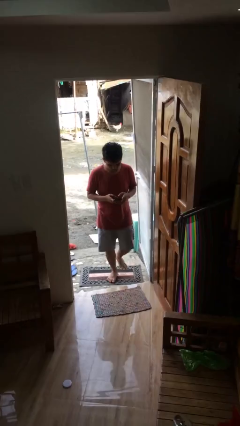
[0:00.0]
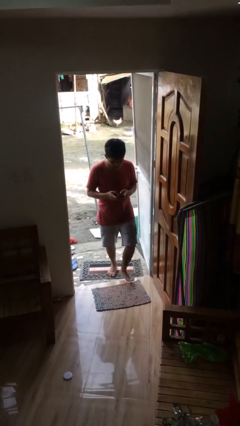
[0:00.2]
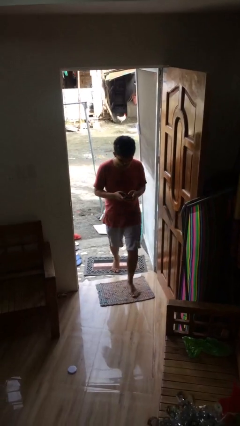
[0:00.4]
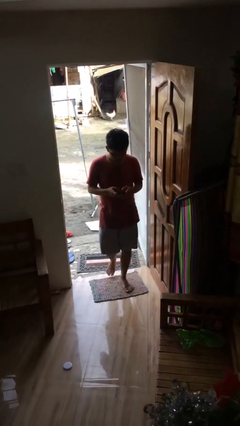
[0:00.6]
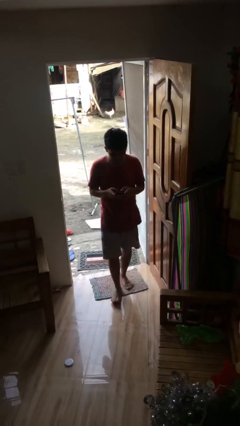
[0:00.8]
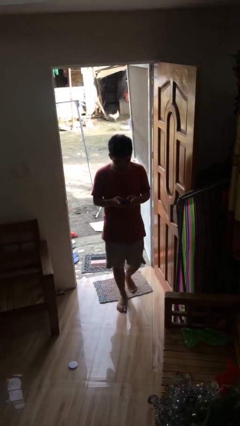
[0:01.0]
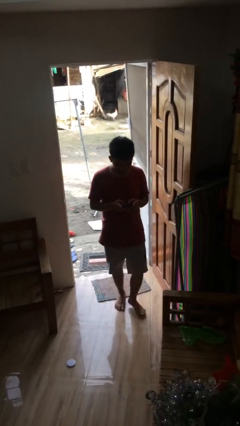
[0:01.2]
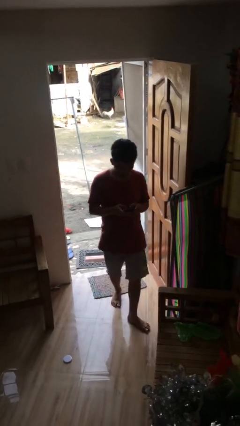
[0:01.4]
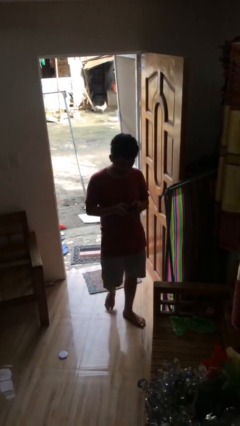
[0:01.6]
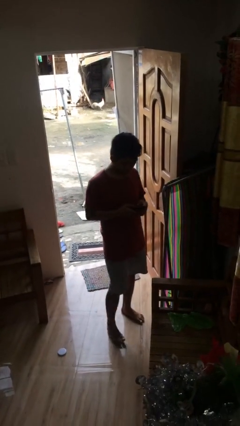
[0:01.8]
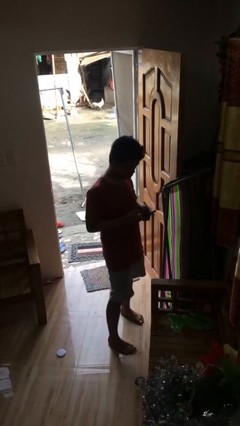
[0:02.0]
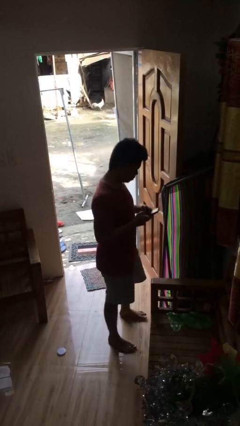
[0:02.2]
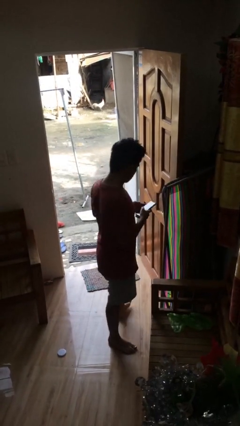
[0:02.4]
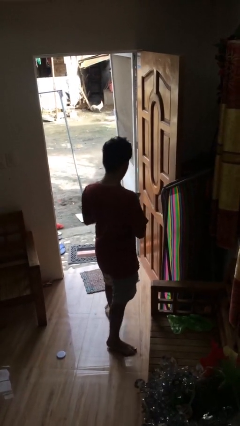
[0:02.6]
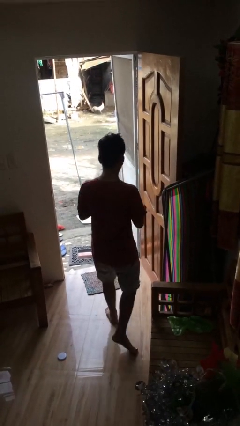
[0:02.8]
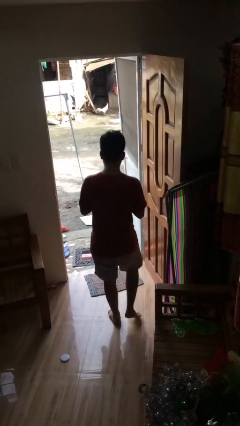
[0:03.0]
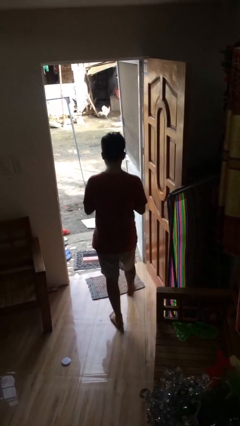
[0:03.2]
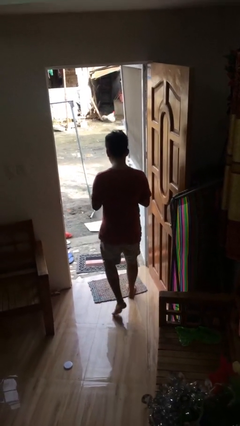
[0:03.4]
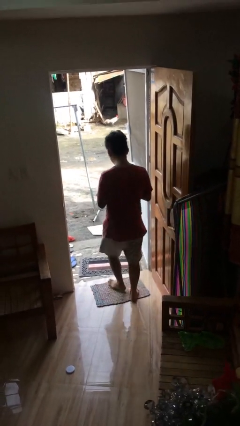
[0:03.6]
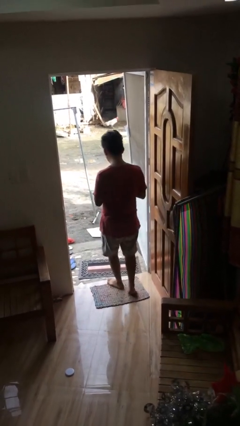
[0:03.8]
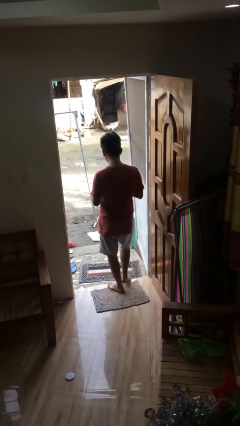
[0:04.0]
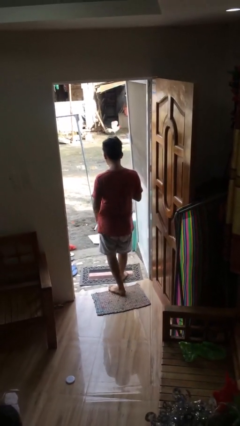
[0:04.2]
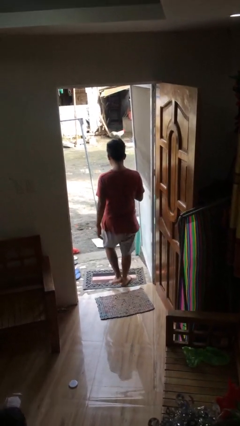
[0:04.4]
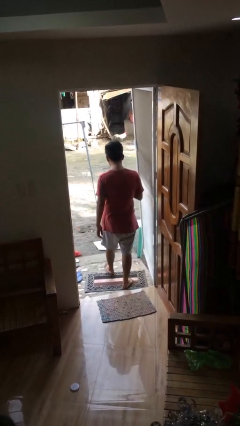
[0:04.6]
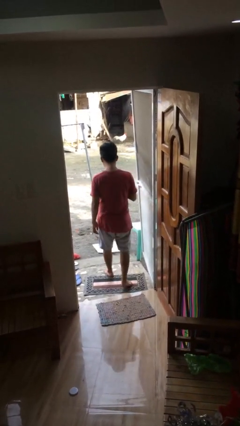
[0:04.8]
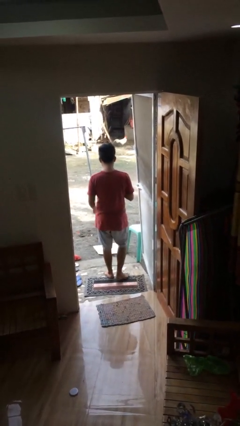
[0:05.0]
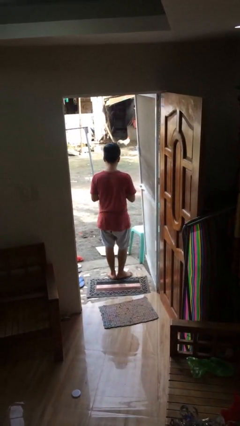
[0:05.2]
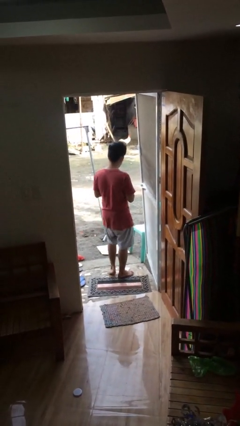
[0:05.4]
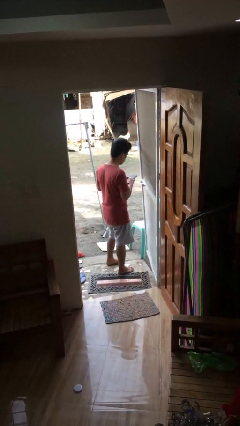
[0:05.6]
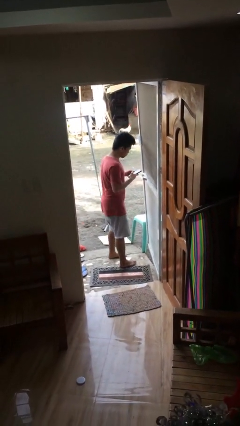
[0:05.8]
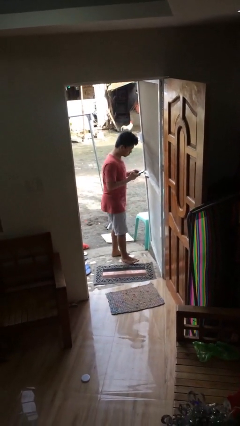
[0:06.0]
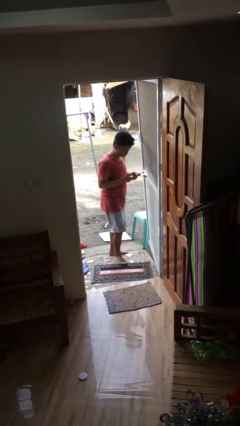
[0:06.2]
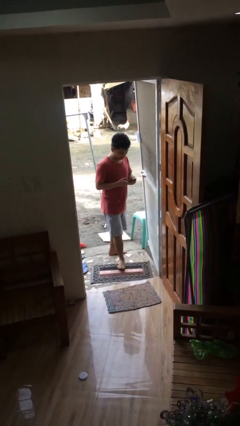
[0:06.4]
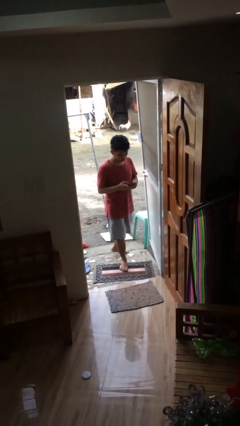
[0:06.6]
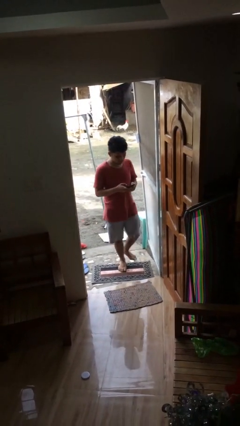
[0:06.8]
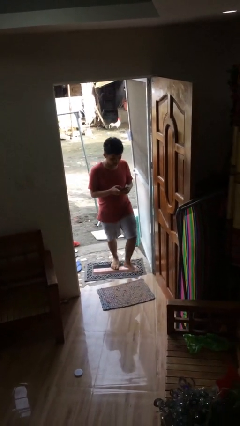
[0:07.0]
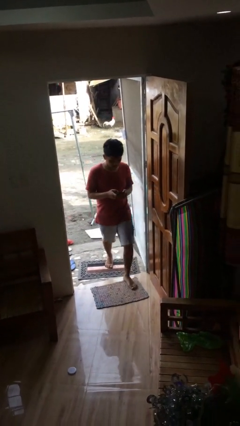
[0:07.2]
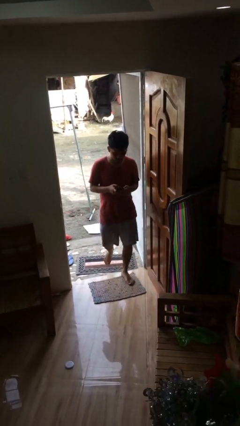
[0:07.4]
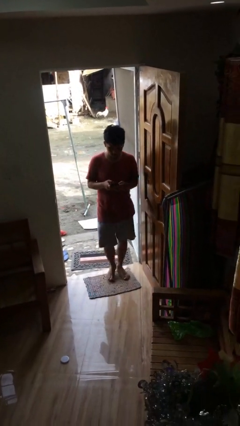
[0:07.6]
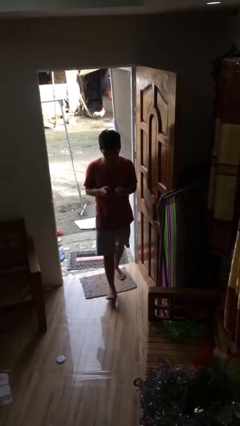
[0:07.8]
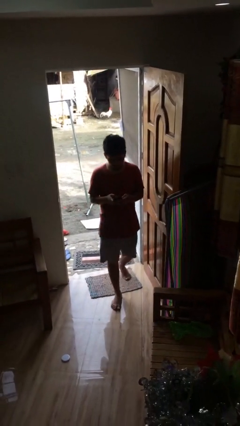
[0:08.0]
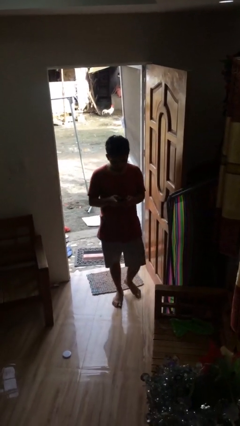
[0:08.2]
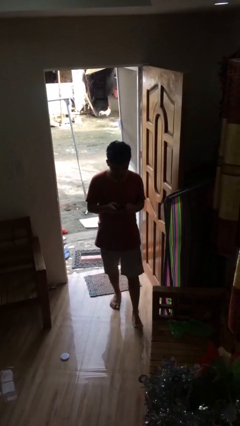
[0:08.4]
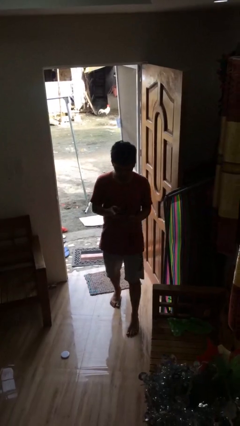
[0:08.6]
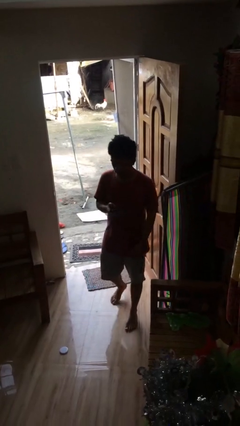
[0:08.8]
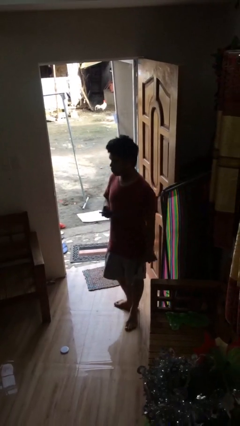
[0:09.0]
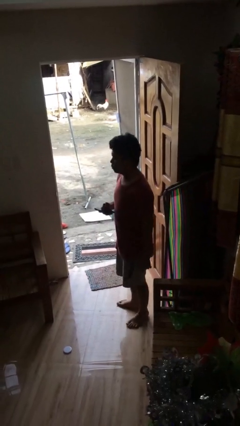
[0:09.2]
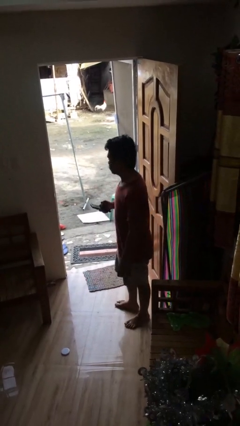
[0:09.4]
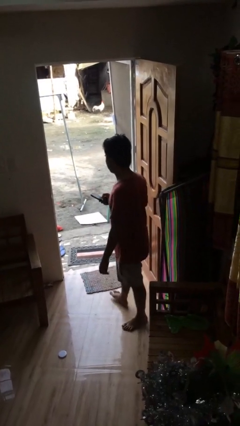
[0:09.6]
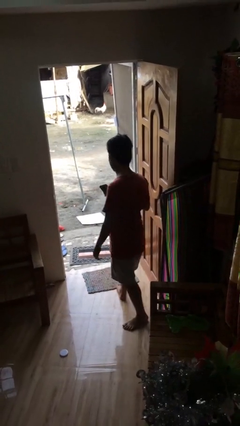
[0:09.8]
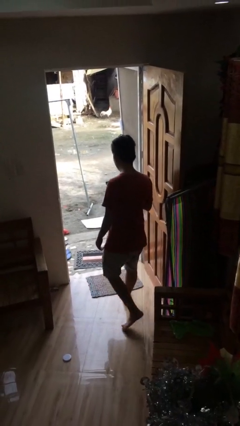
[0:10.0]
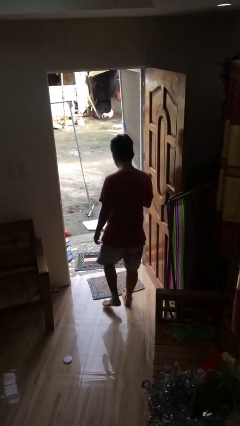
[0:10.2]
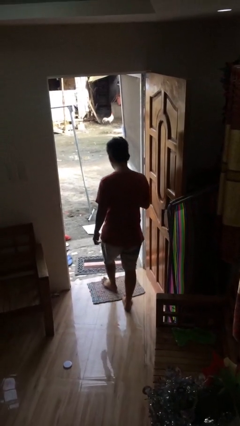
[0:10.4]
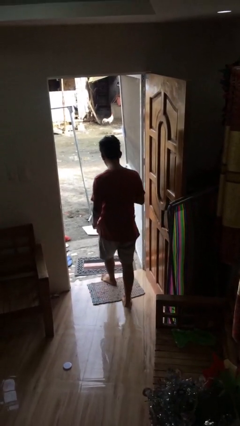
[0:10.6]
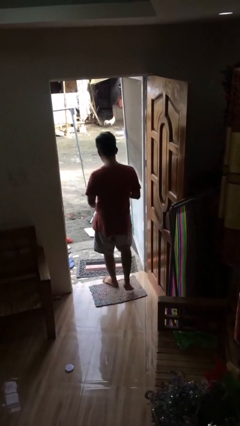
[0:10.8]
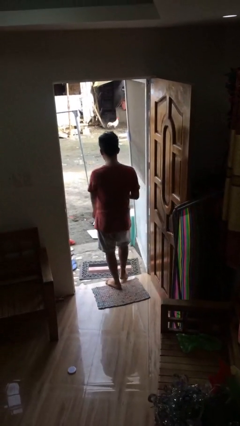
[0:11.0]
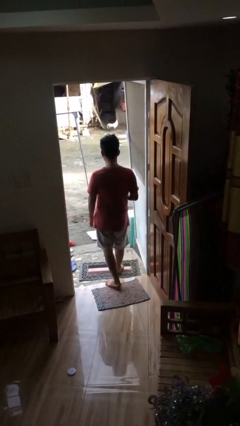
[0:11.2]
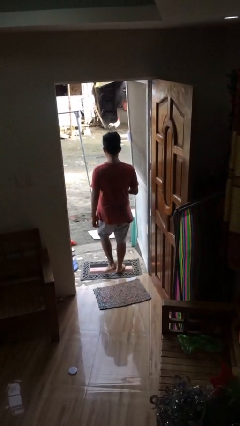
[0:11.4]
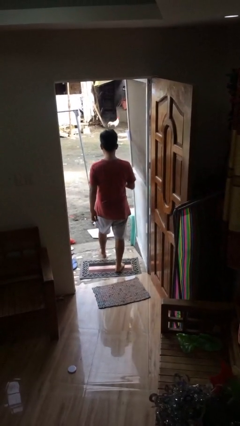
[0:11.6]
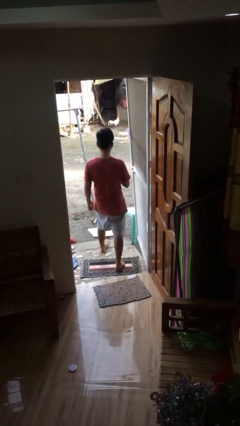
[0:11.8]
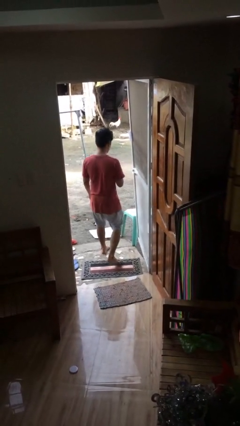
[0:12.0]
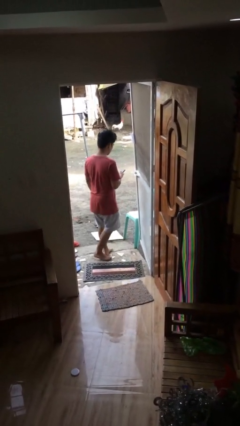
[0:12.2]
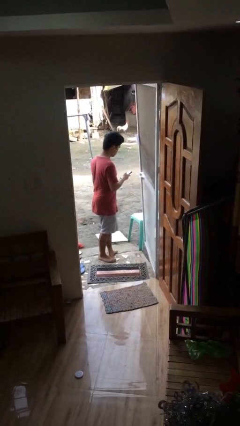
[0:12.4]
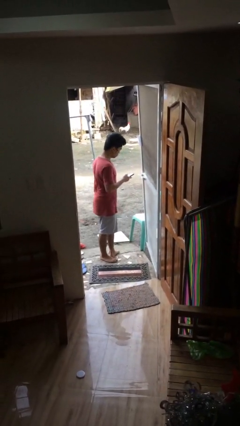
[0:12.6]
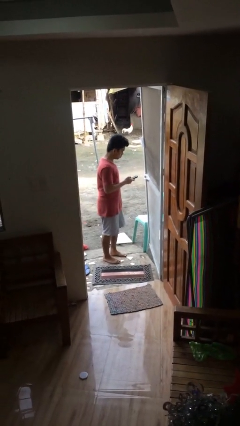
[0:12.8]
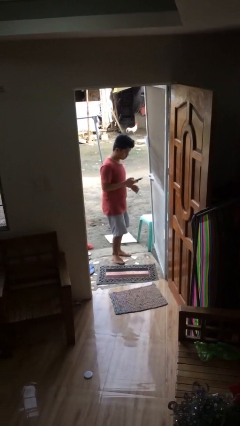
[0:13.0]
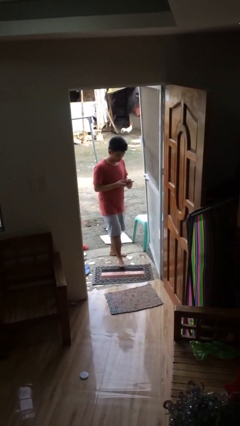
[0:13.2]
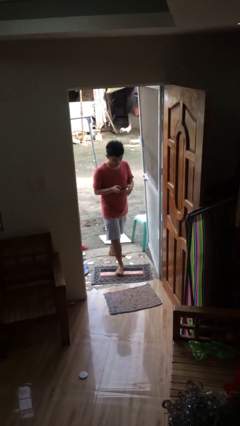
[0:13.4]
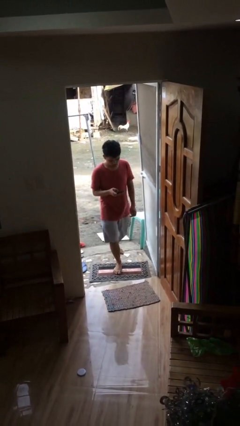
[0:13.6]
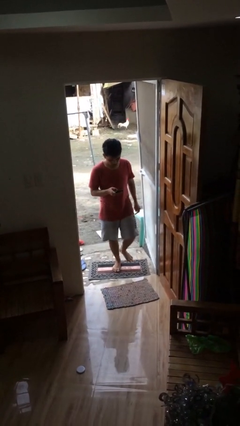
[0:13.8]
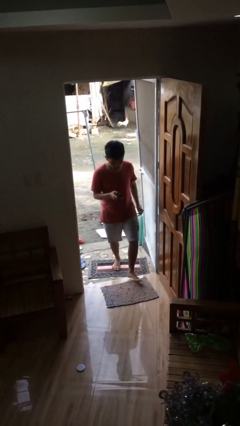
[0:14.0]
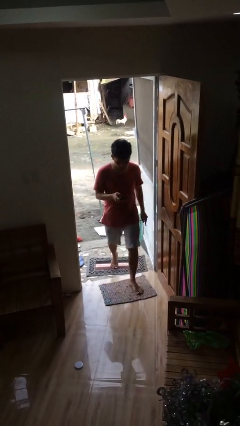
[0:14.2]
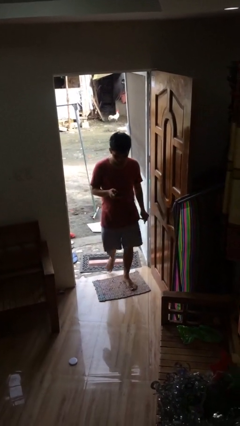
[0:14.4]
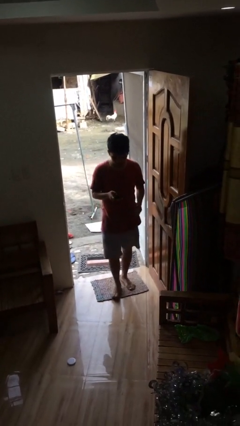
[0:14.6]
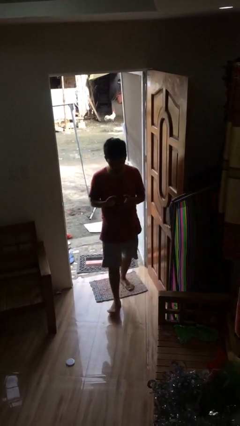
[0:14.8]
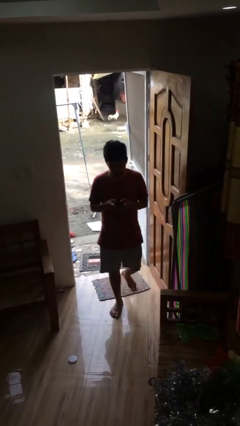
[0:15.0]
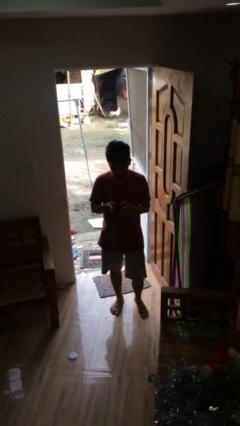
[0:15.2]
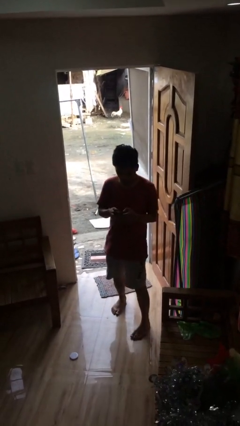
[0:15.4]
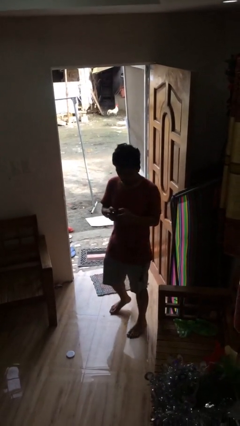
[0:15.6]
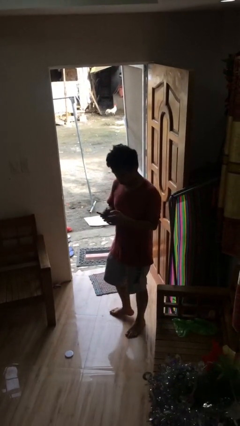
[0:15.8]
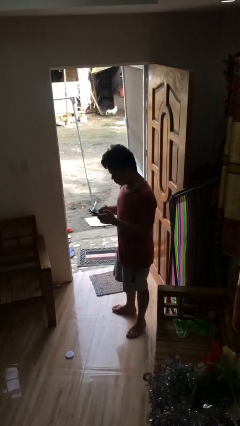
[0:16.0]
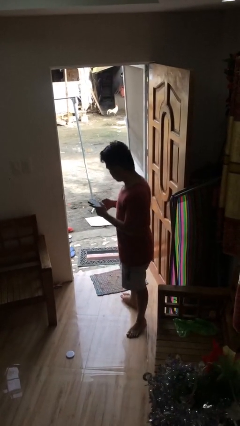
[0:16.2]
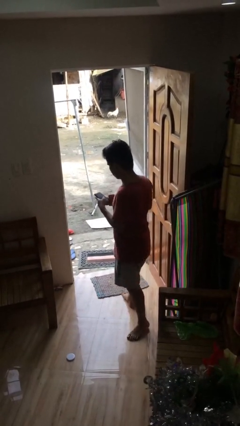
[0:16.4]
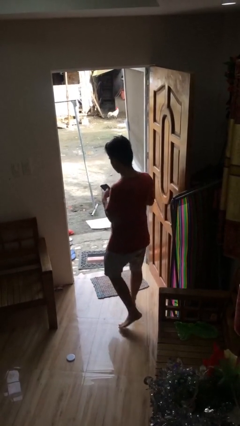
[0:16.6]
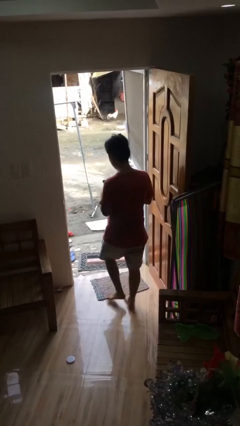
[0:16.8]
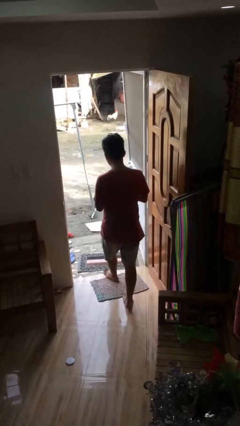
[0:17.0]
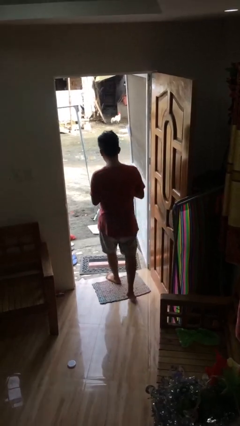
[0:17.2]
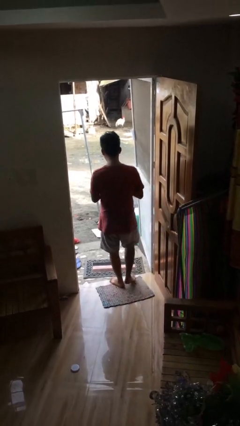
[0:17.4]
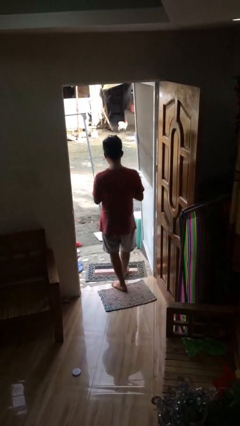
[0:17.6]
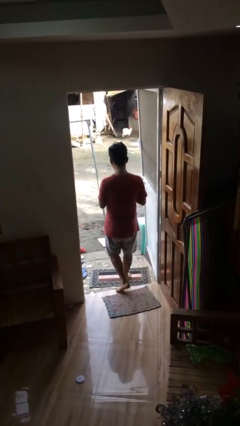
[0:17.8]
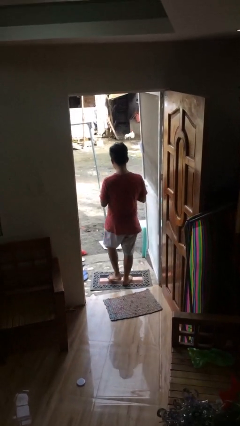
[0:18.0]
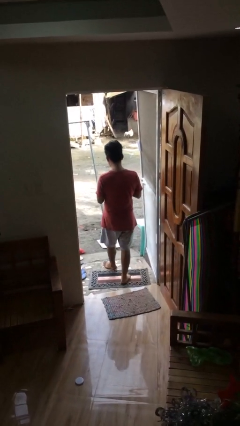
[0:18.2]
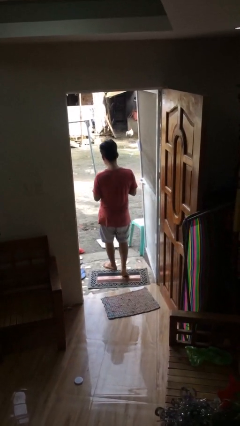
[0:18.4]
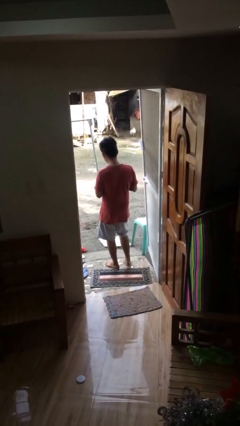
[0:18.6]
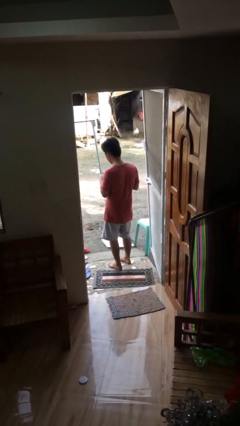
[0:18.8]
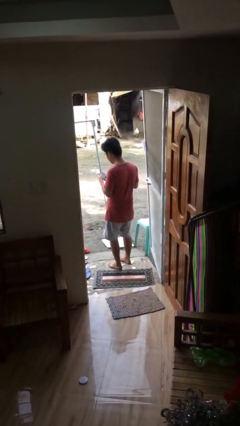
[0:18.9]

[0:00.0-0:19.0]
person texts on phone
